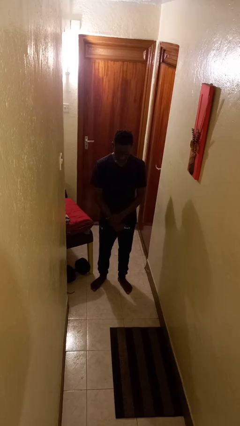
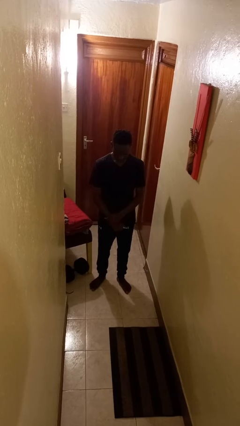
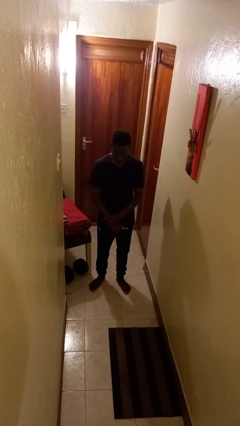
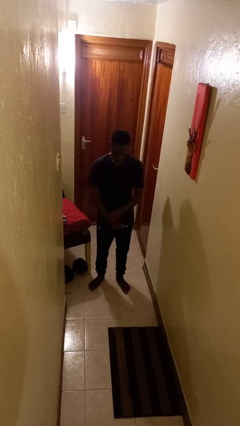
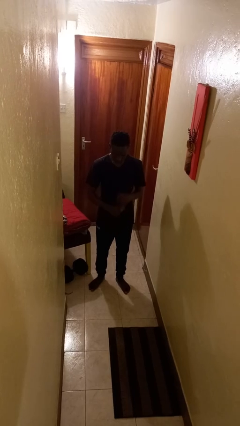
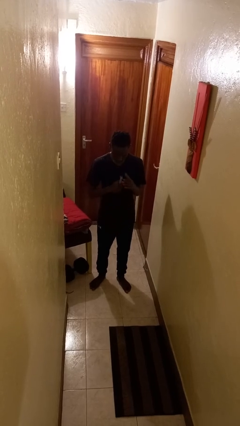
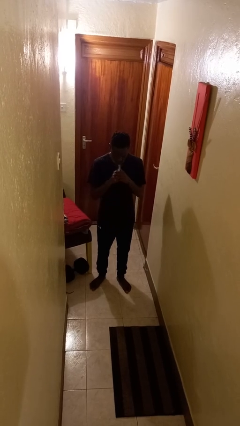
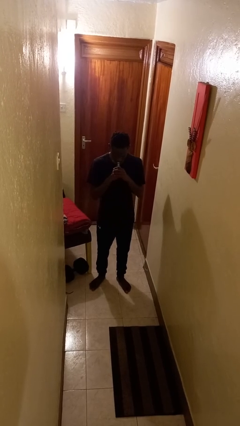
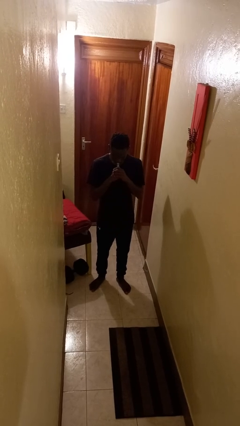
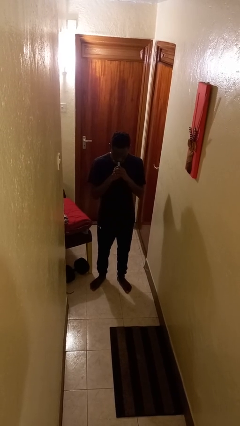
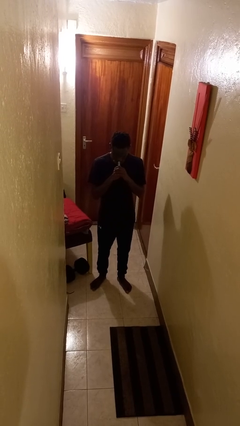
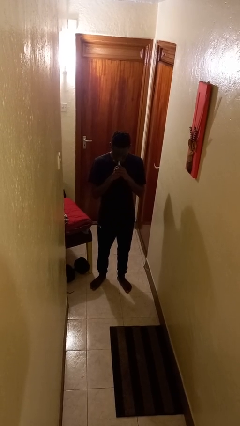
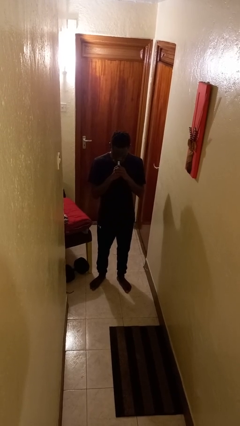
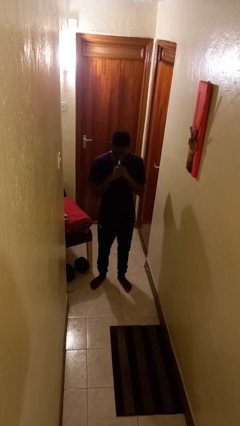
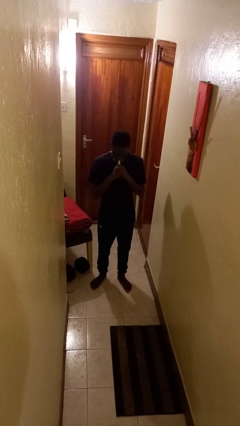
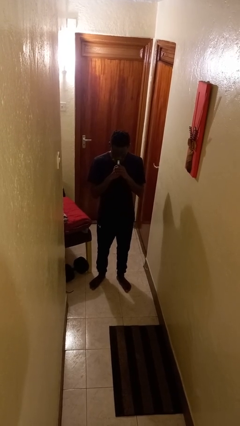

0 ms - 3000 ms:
person vapes

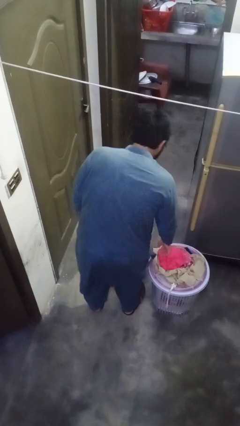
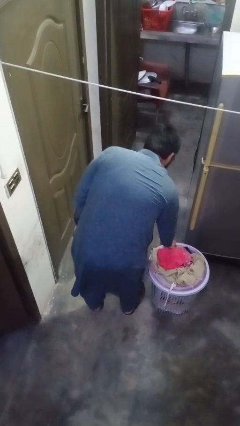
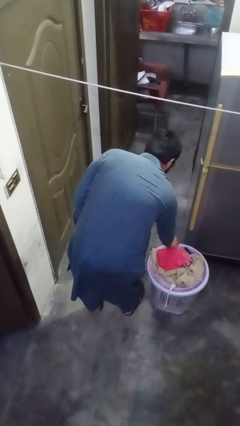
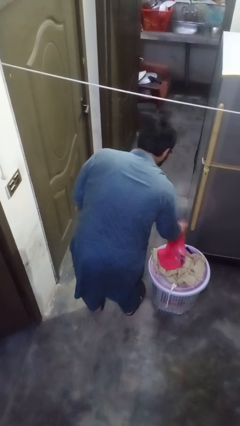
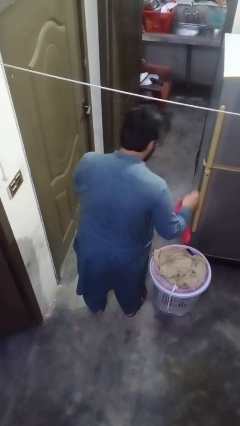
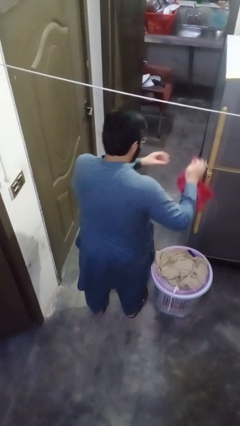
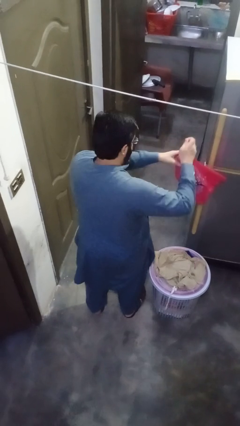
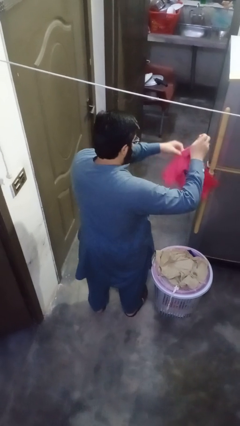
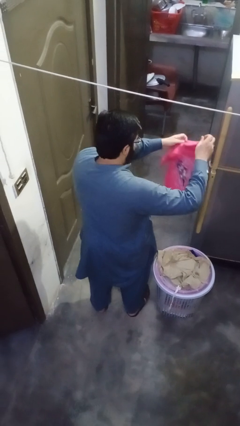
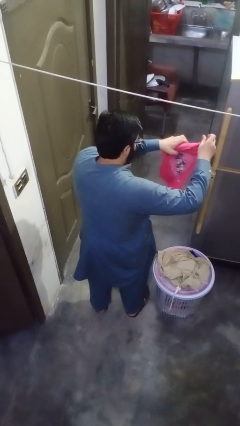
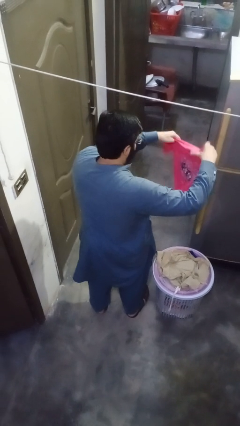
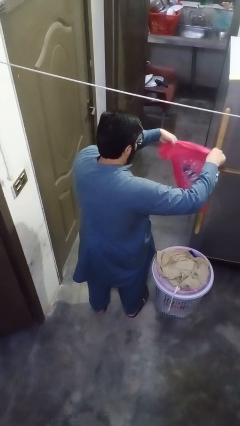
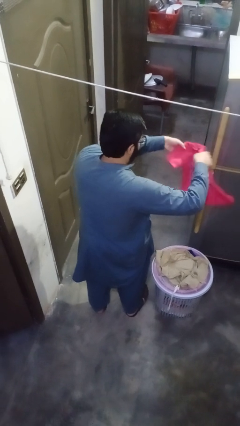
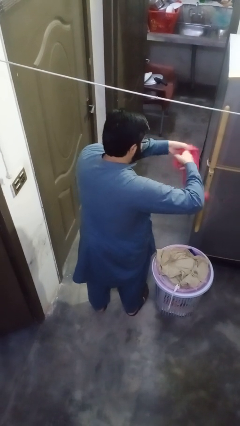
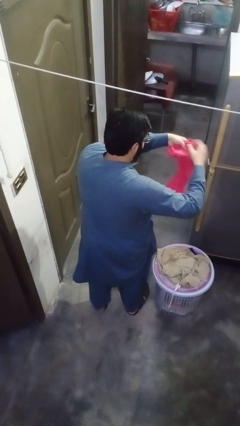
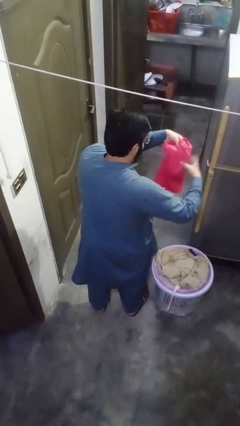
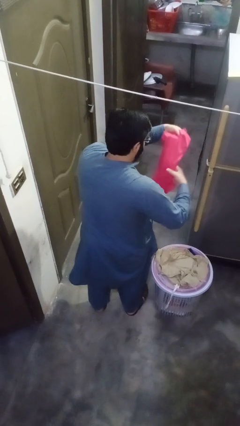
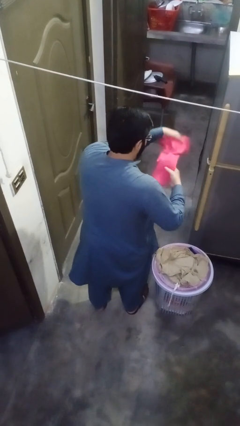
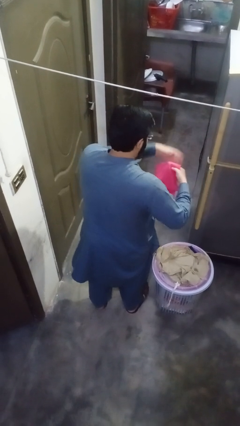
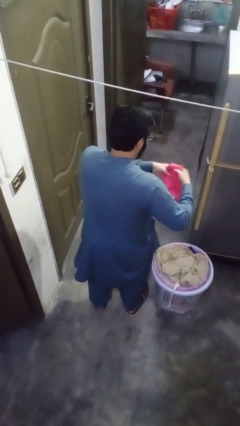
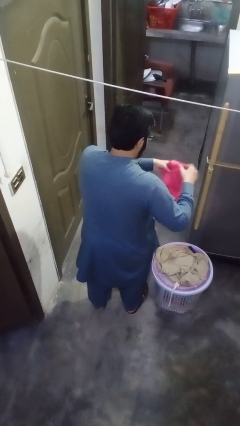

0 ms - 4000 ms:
person folds shirt

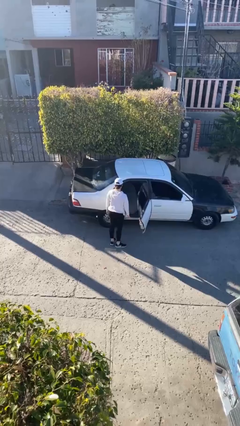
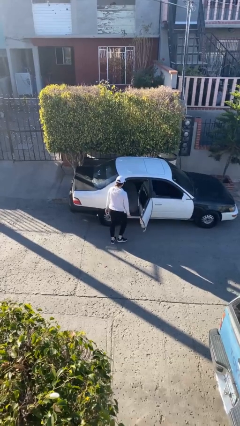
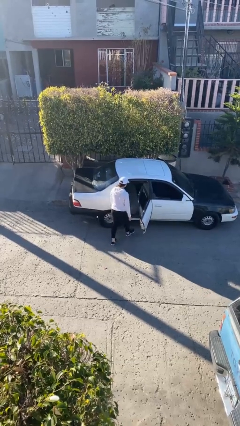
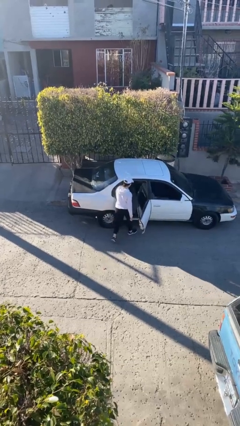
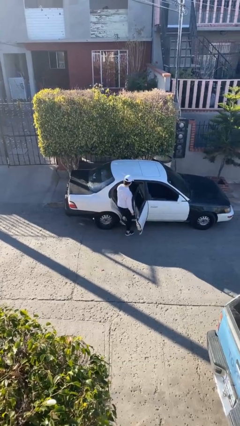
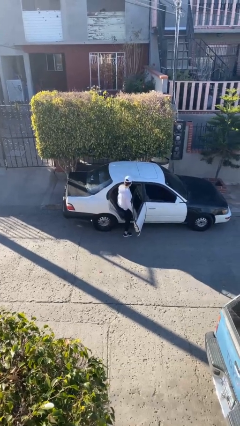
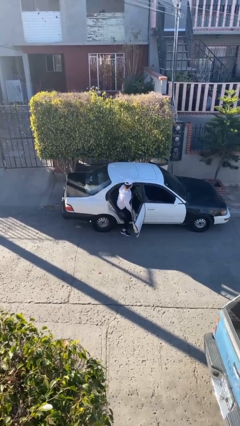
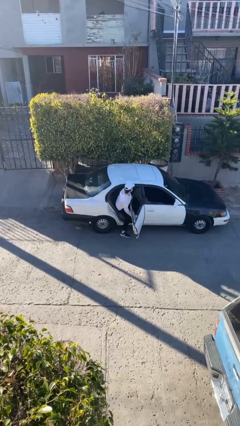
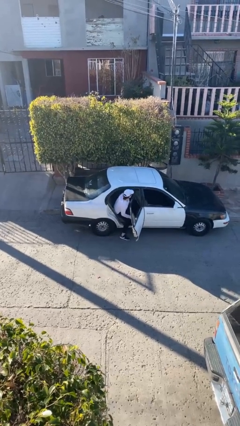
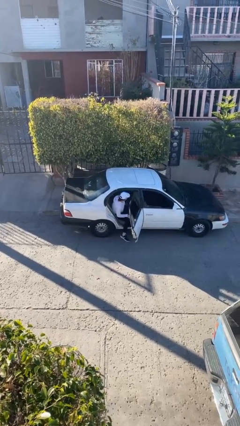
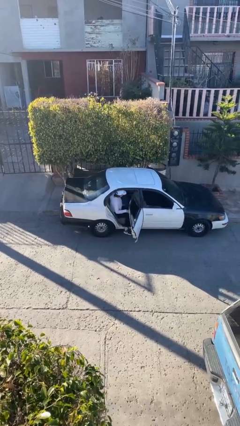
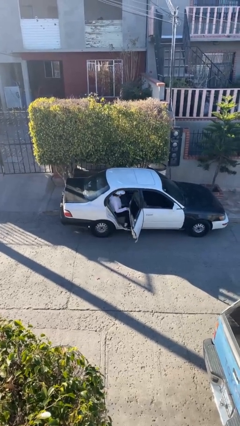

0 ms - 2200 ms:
person enters car

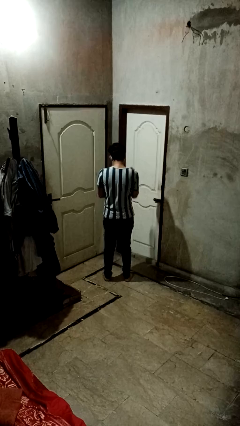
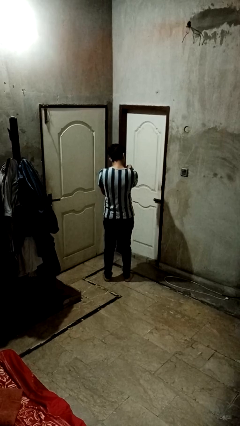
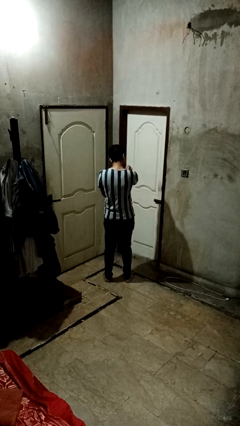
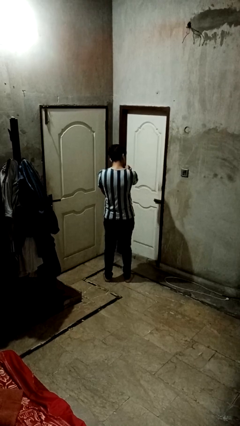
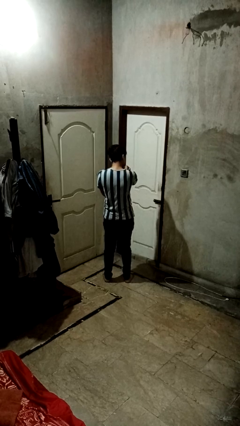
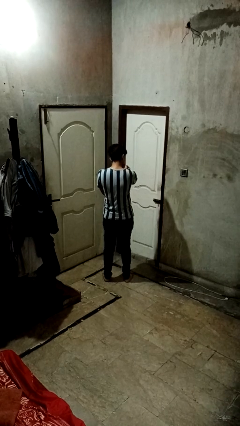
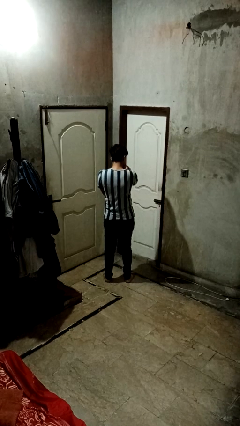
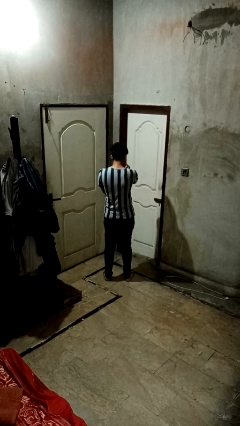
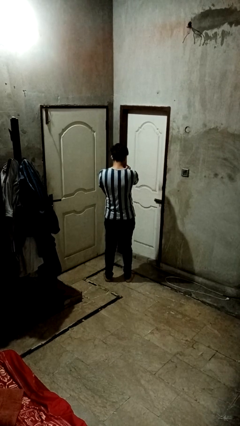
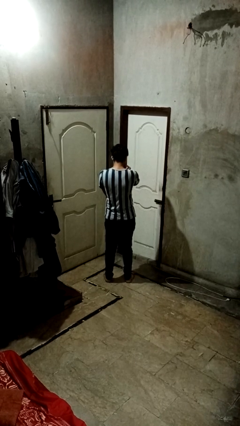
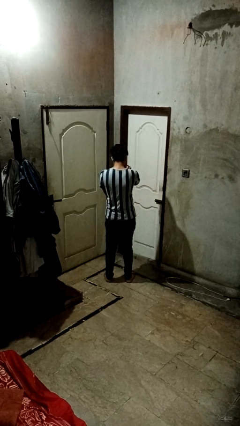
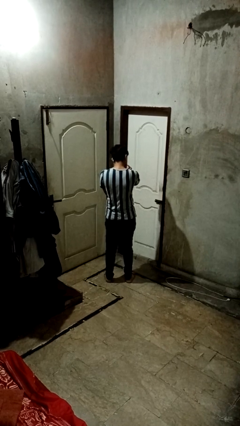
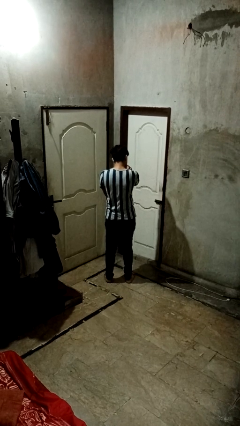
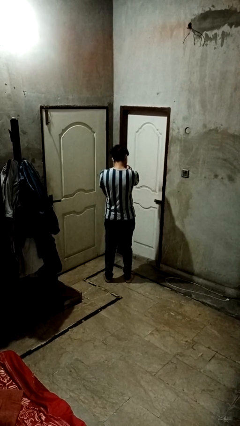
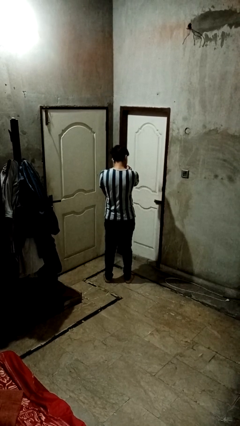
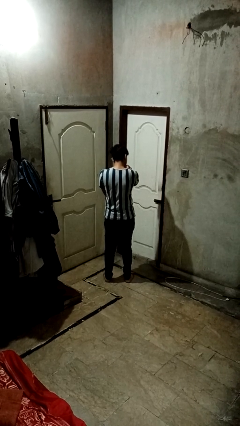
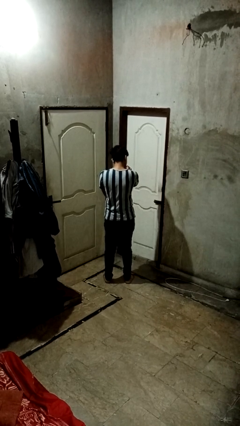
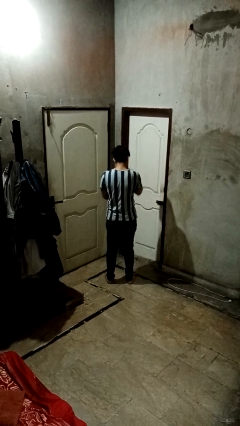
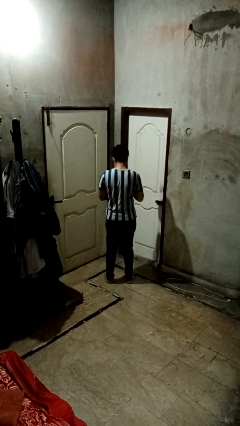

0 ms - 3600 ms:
person swats bug

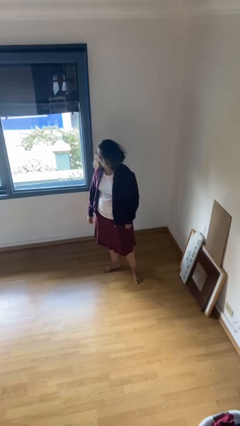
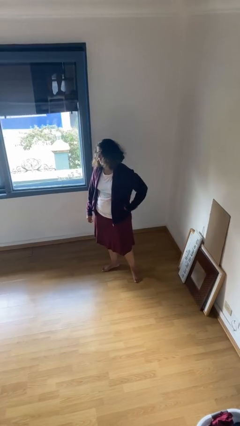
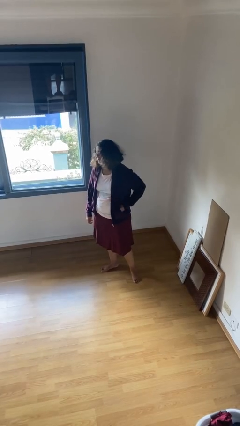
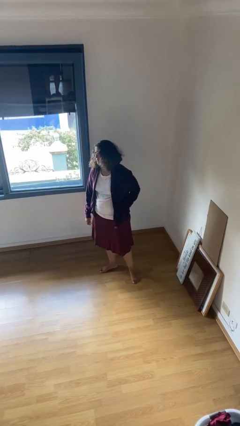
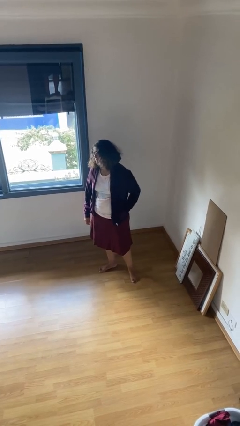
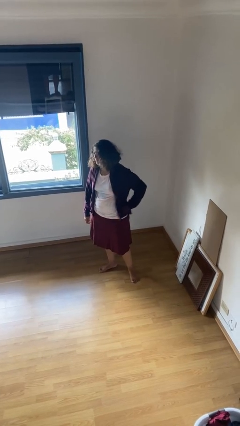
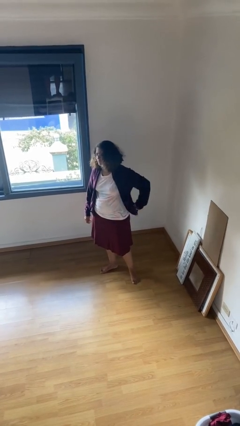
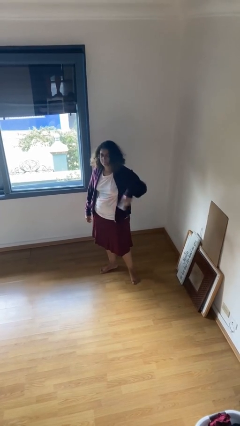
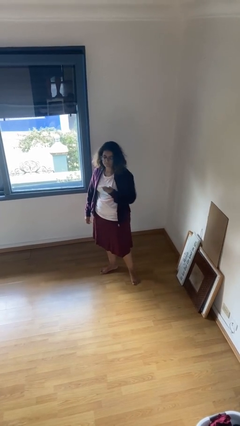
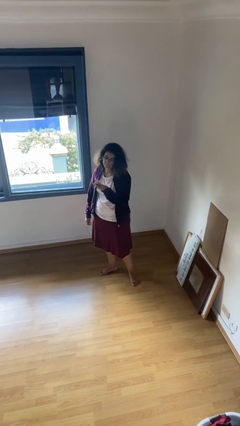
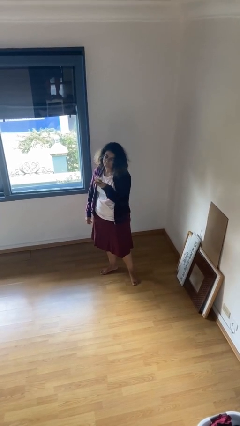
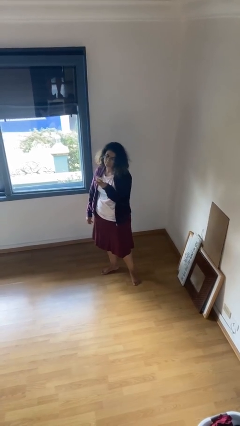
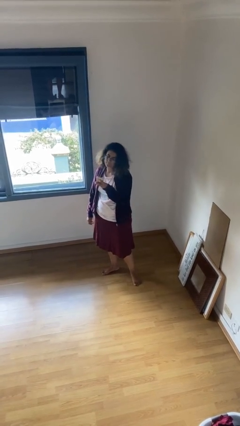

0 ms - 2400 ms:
person takes phone from pocket

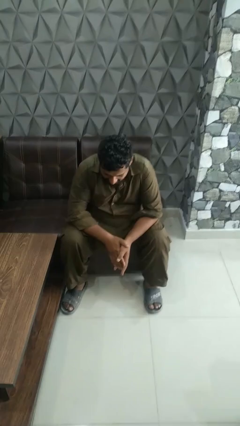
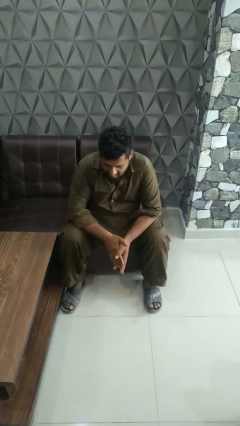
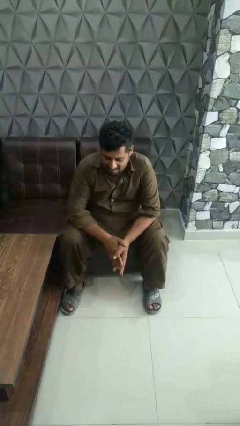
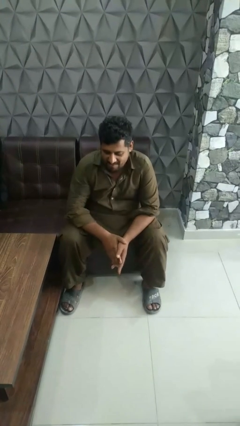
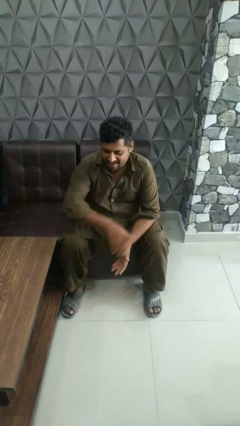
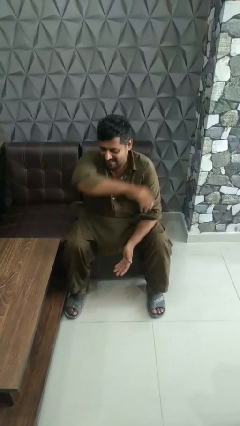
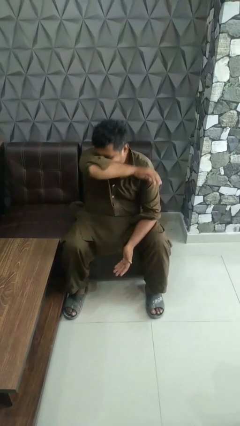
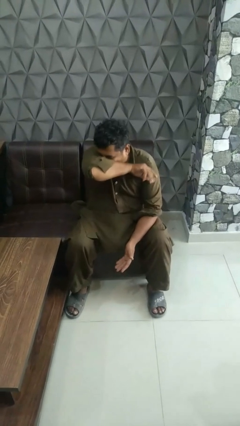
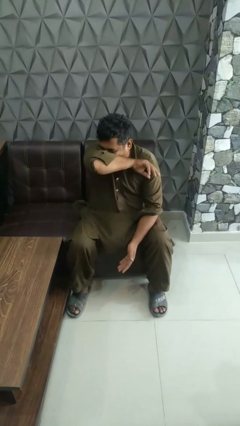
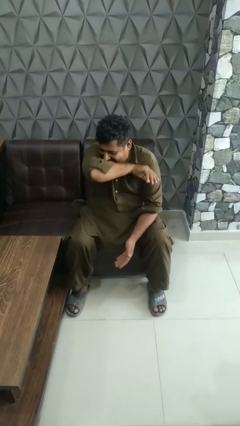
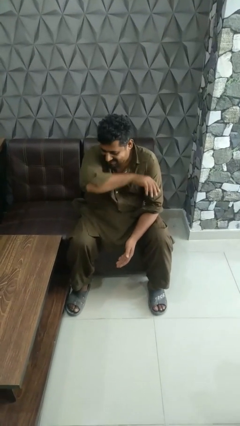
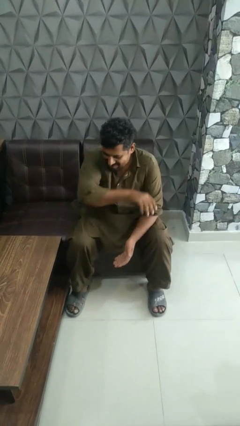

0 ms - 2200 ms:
person sneezes into arm

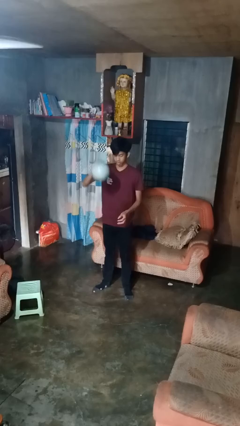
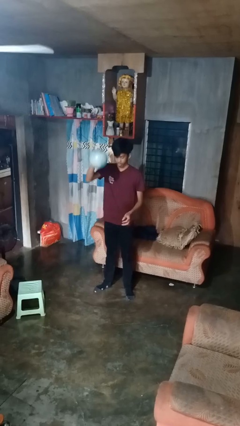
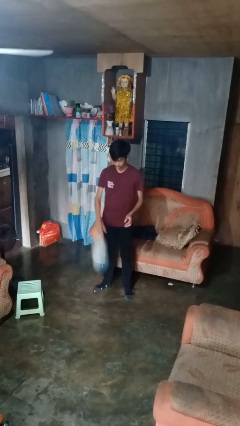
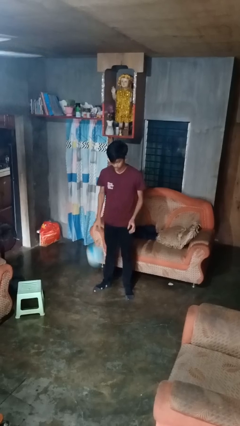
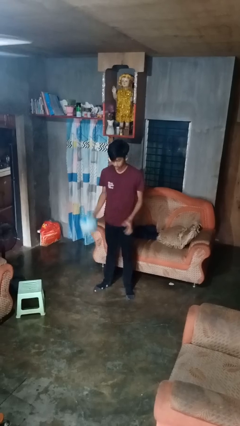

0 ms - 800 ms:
person bounces ball on floor
